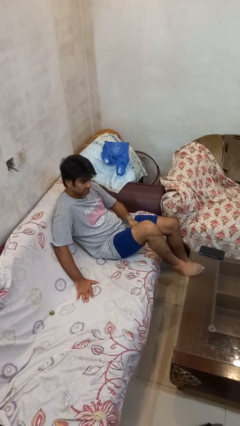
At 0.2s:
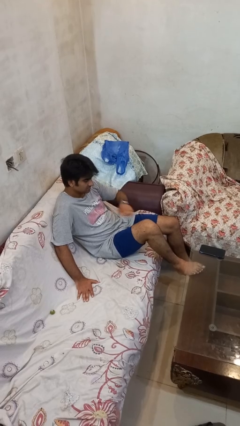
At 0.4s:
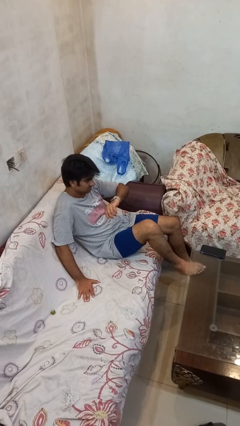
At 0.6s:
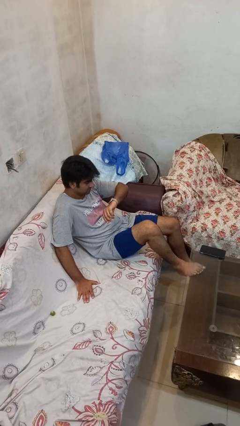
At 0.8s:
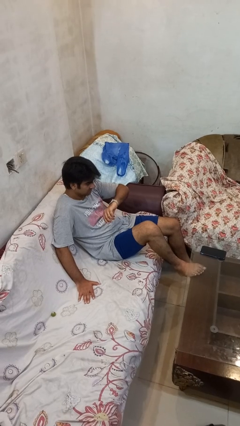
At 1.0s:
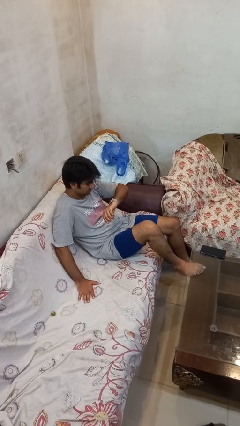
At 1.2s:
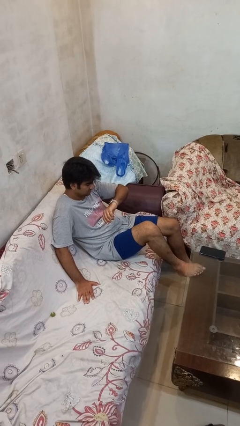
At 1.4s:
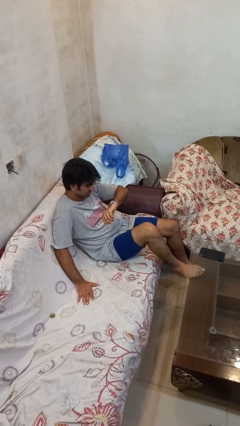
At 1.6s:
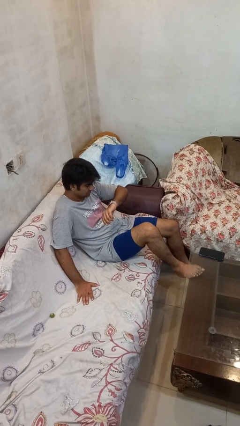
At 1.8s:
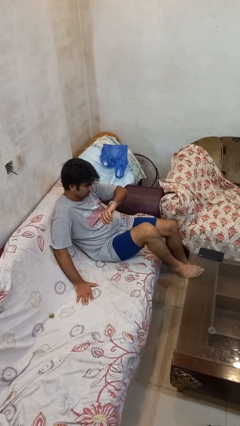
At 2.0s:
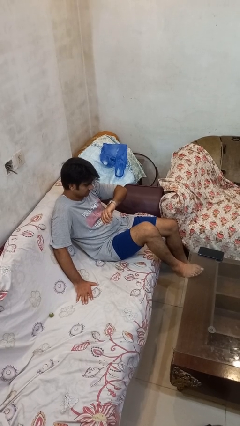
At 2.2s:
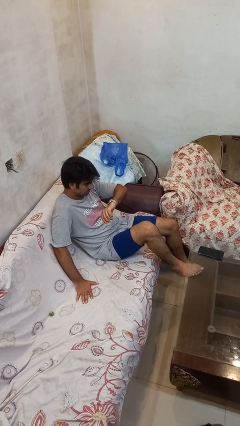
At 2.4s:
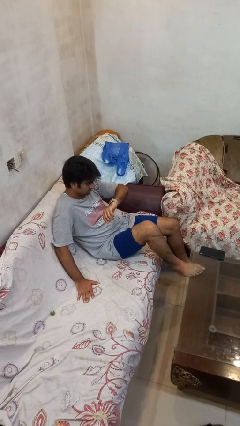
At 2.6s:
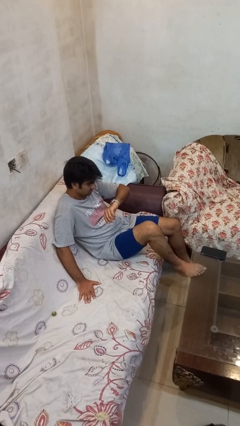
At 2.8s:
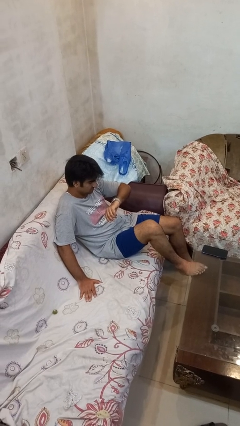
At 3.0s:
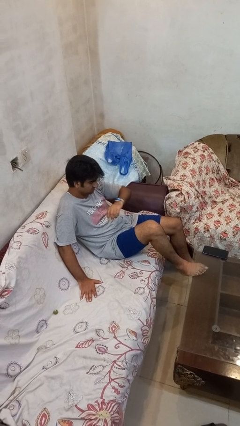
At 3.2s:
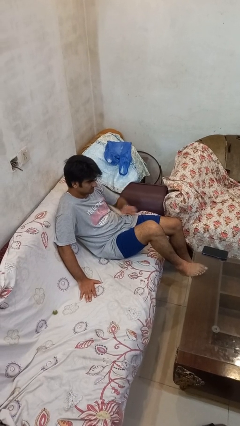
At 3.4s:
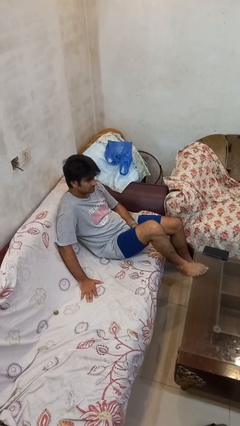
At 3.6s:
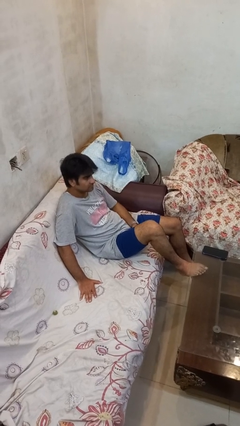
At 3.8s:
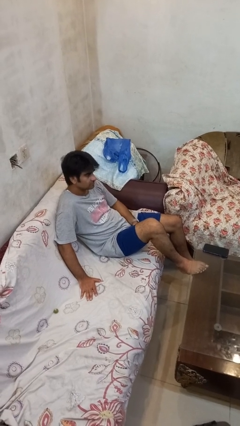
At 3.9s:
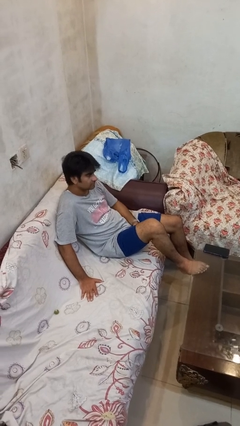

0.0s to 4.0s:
person looks at wristwatch

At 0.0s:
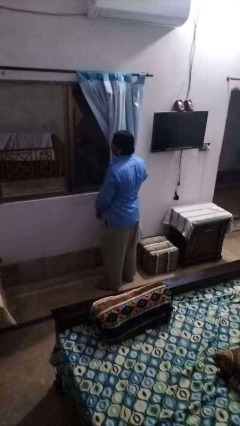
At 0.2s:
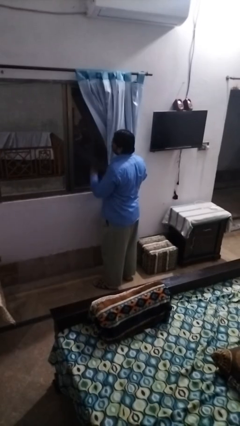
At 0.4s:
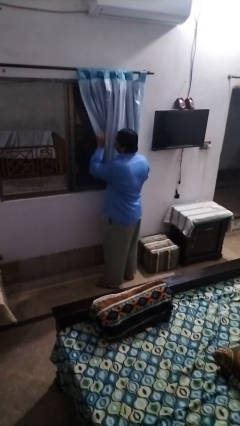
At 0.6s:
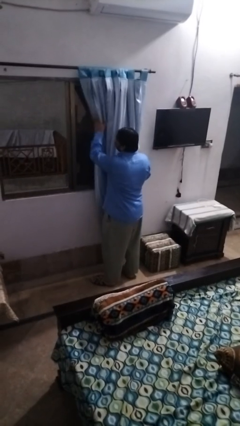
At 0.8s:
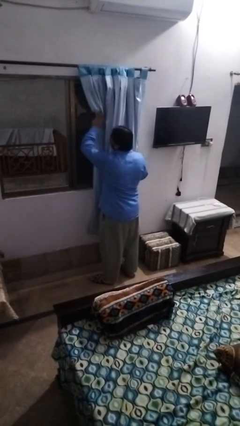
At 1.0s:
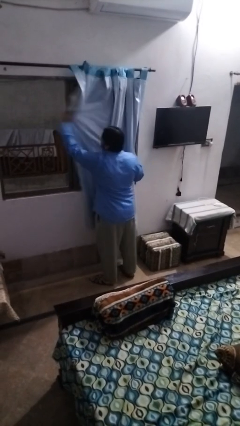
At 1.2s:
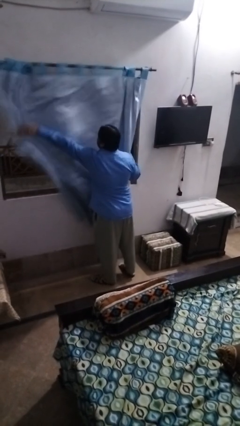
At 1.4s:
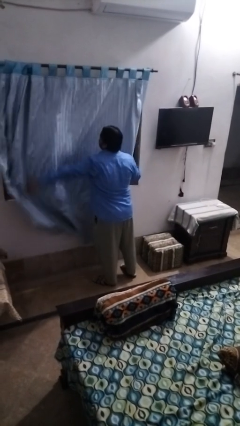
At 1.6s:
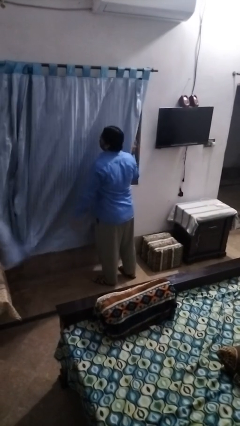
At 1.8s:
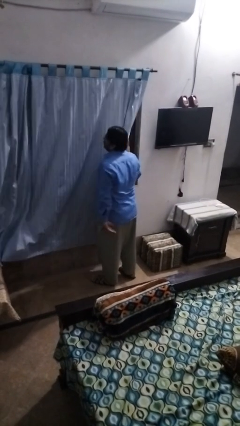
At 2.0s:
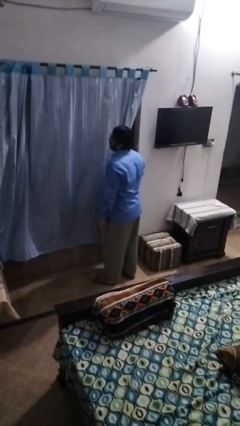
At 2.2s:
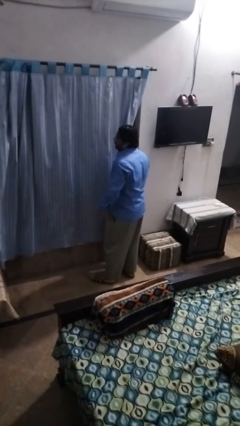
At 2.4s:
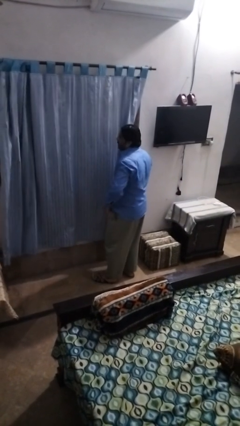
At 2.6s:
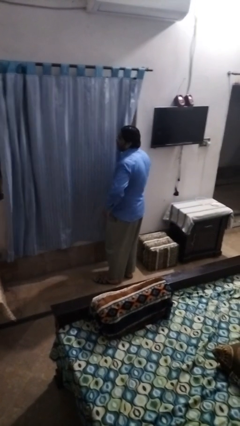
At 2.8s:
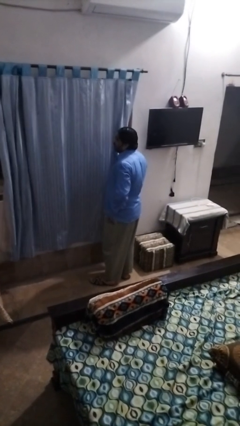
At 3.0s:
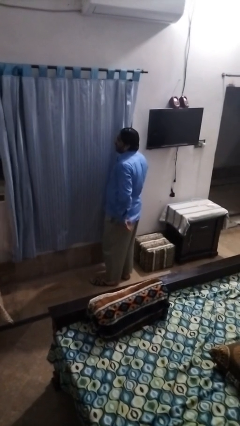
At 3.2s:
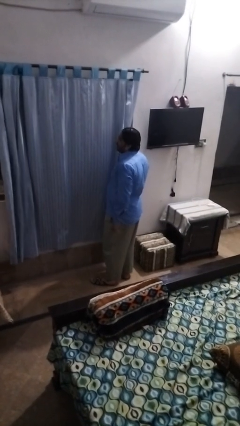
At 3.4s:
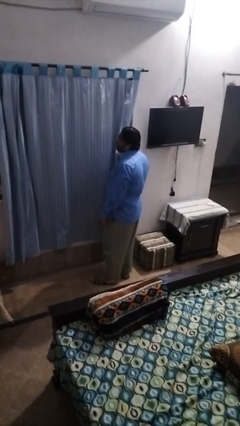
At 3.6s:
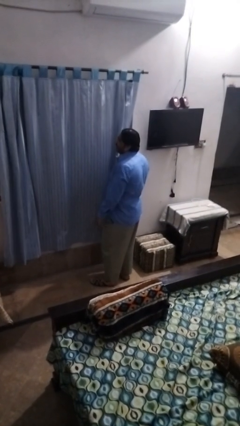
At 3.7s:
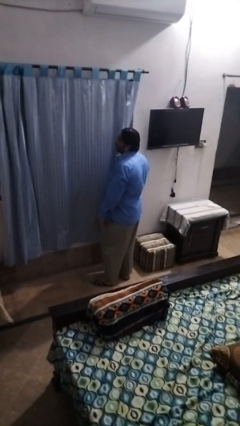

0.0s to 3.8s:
person closes curtains

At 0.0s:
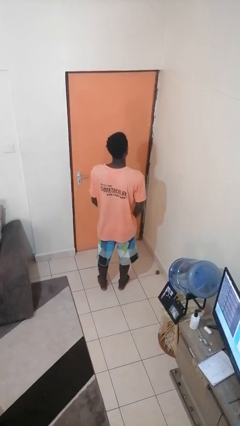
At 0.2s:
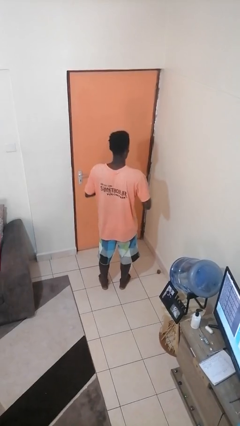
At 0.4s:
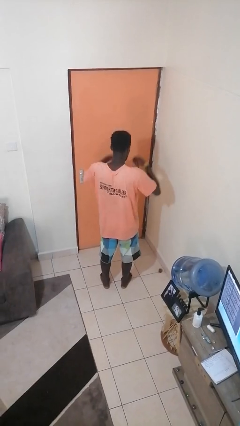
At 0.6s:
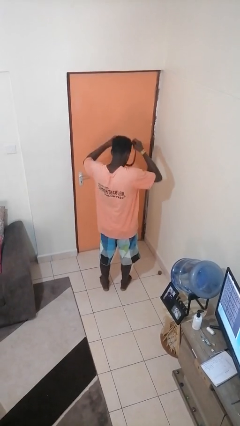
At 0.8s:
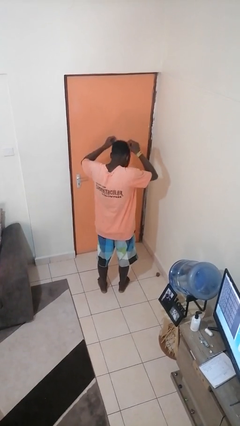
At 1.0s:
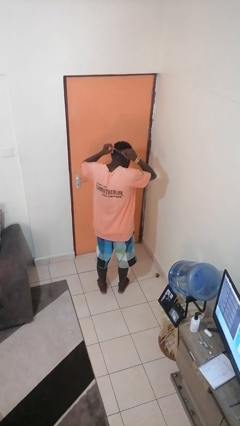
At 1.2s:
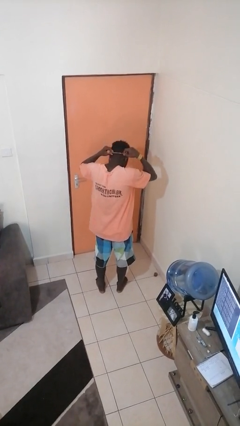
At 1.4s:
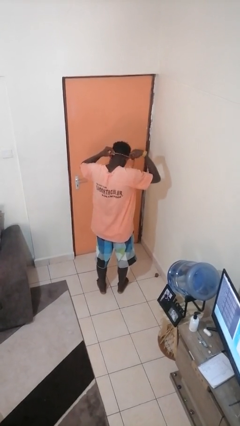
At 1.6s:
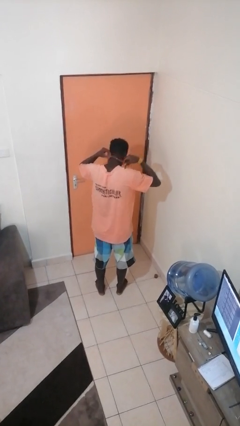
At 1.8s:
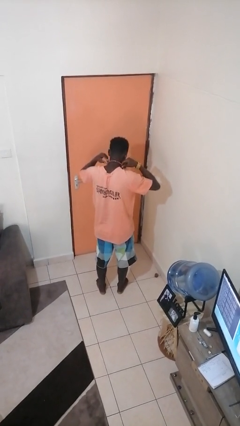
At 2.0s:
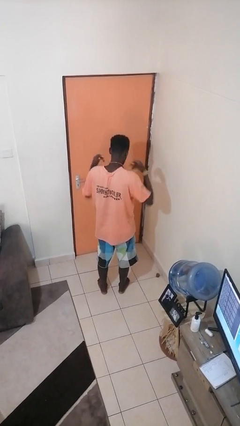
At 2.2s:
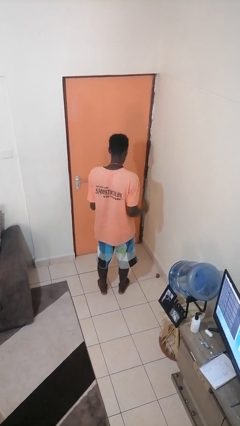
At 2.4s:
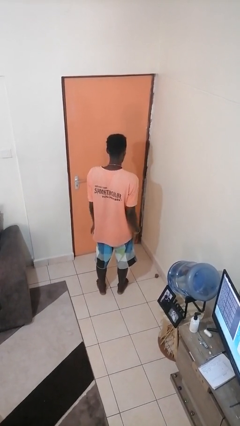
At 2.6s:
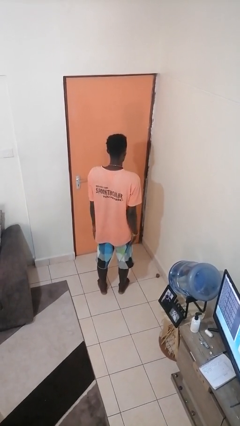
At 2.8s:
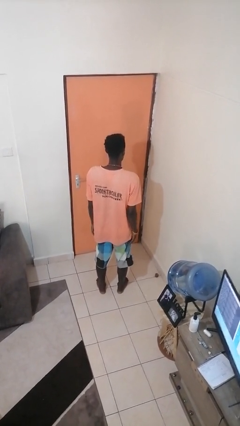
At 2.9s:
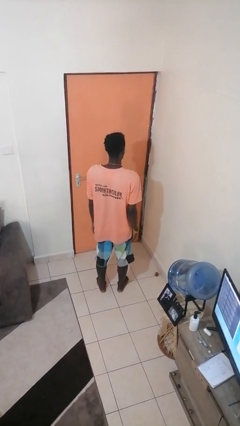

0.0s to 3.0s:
person puts on necklace

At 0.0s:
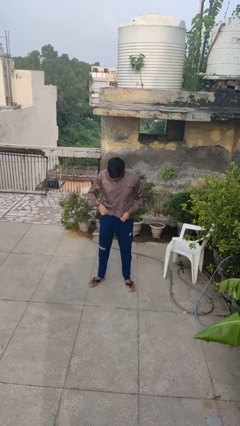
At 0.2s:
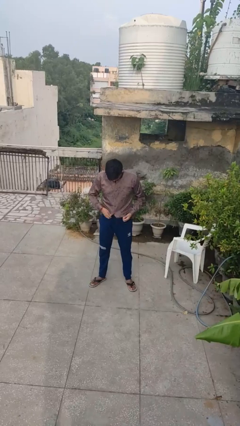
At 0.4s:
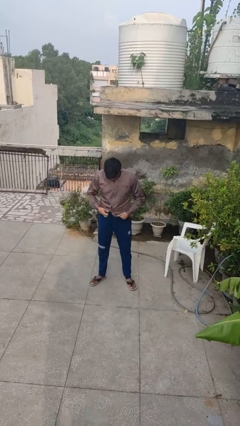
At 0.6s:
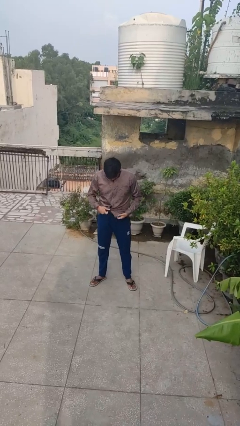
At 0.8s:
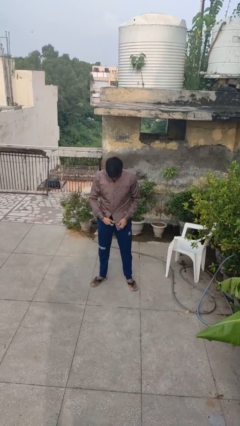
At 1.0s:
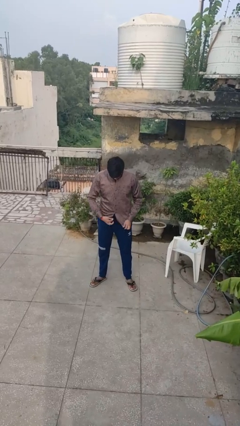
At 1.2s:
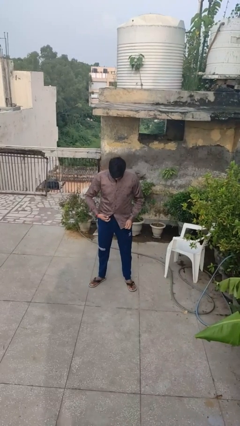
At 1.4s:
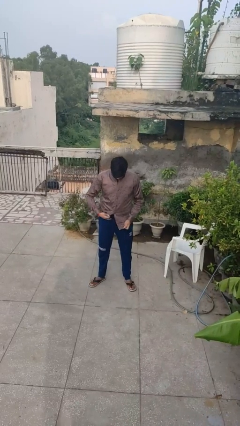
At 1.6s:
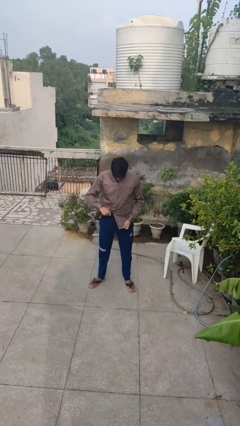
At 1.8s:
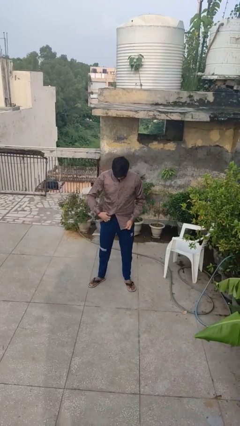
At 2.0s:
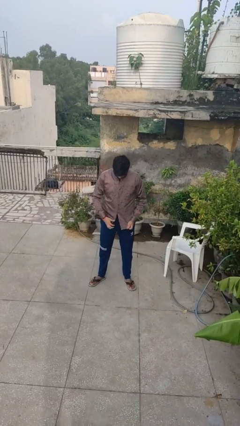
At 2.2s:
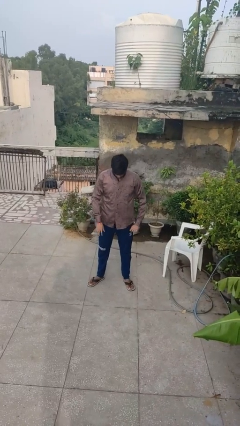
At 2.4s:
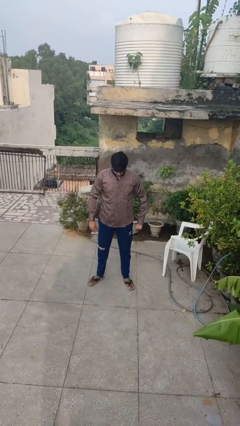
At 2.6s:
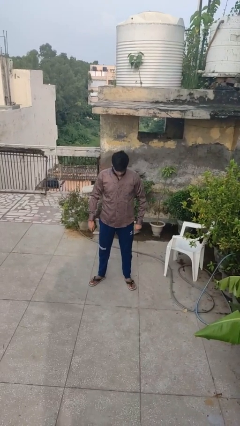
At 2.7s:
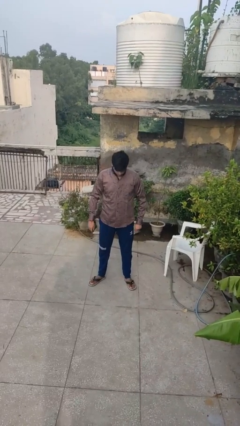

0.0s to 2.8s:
person untucks shirt

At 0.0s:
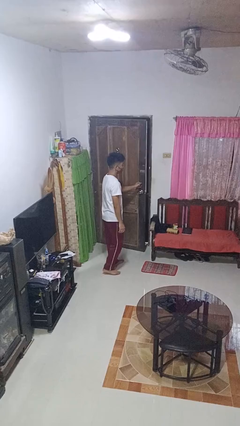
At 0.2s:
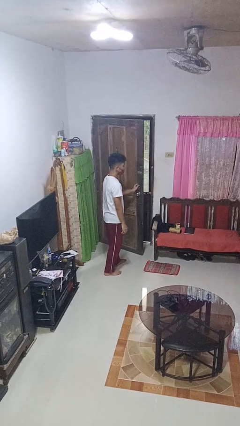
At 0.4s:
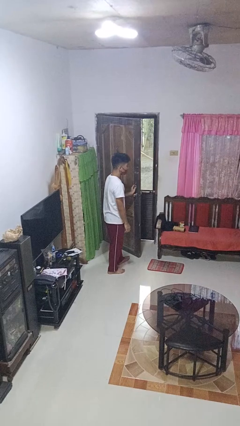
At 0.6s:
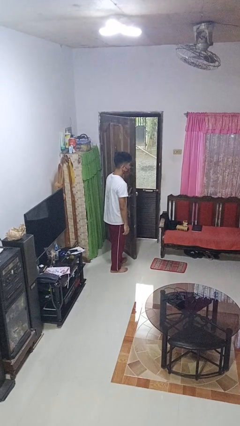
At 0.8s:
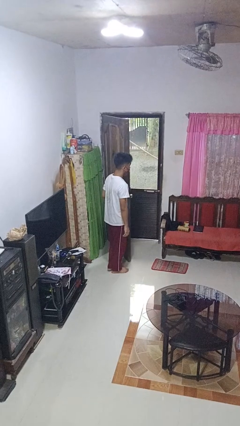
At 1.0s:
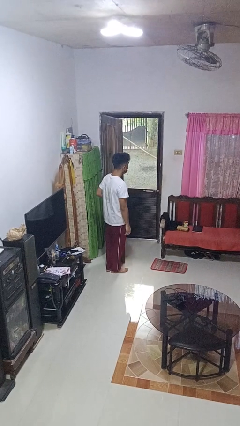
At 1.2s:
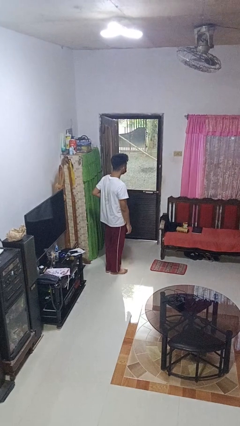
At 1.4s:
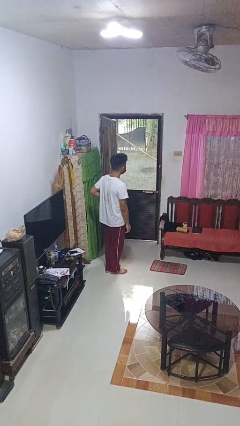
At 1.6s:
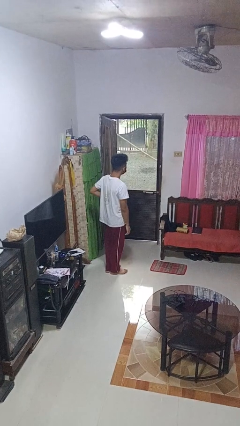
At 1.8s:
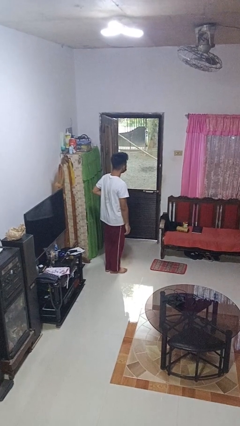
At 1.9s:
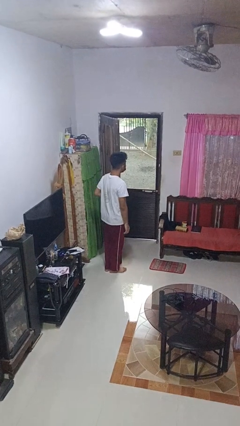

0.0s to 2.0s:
person opens facility door

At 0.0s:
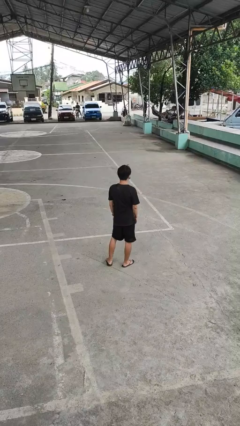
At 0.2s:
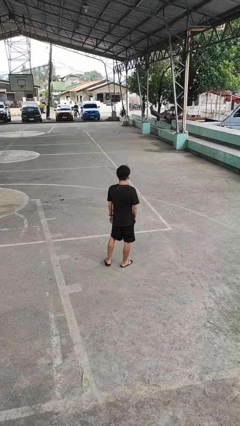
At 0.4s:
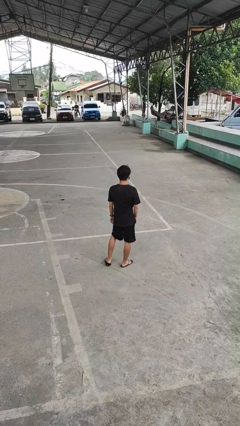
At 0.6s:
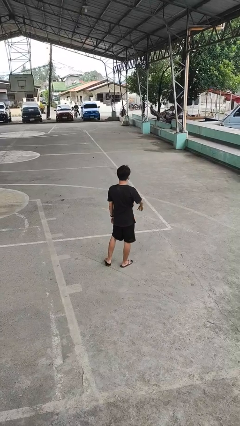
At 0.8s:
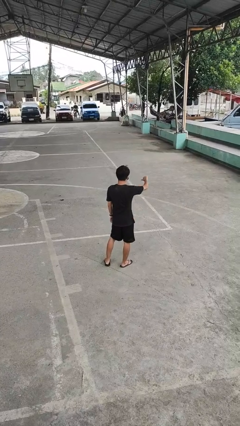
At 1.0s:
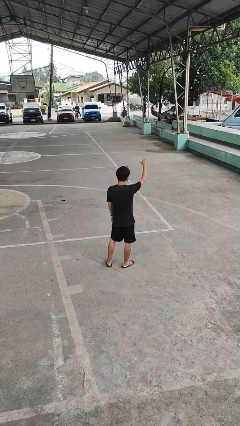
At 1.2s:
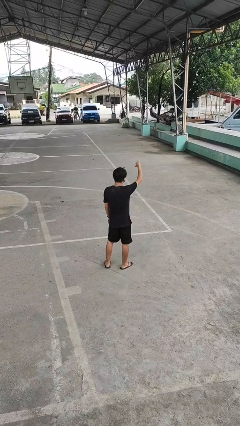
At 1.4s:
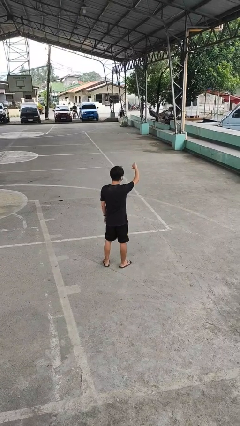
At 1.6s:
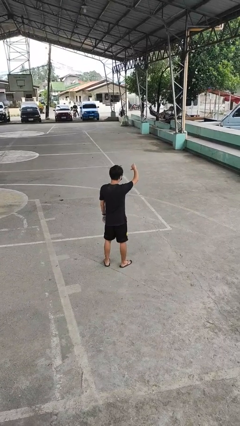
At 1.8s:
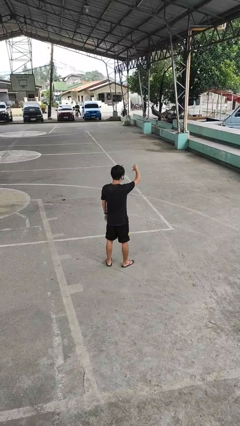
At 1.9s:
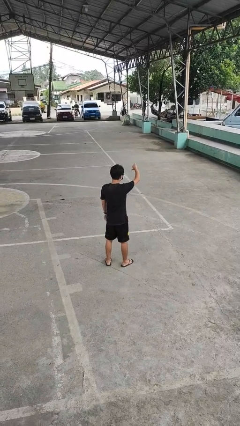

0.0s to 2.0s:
person gestures thumbs down
